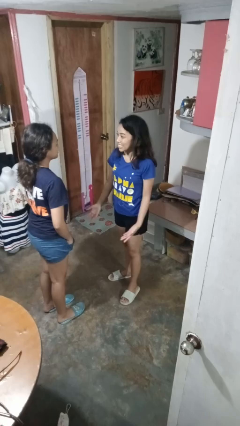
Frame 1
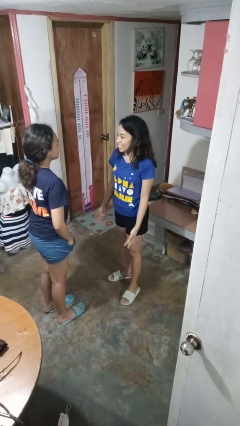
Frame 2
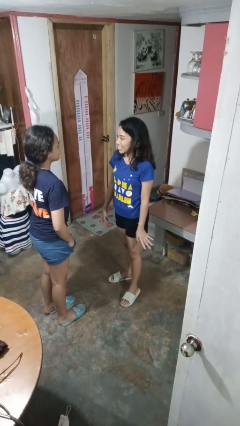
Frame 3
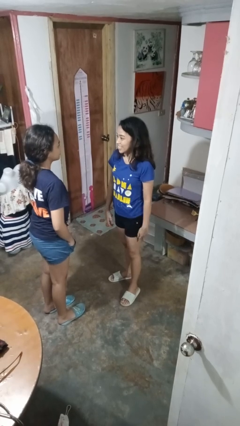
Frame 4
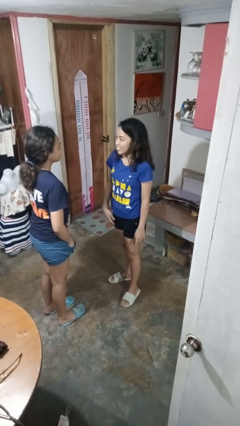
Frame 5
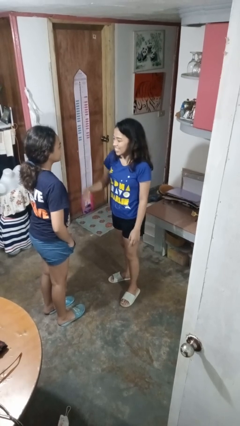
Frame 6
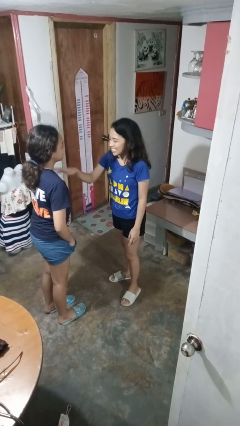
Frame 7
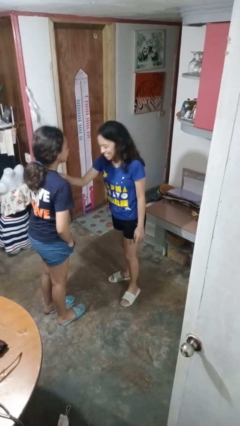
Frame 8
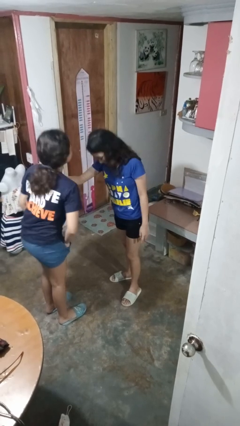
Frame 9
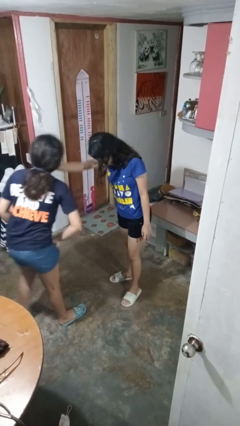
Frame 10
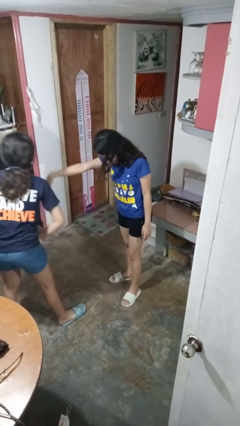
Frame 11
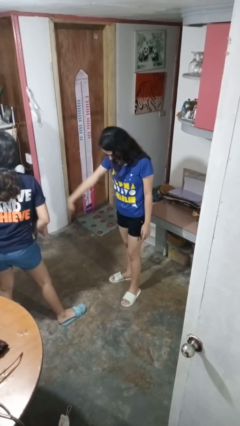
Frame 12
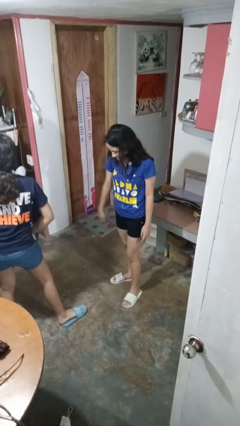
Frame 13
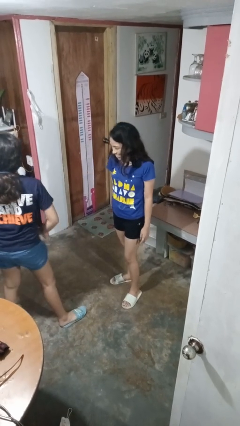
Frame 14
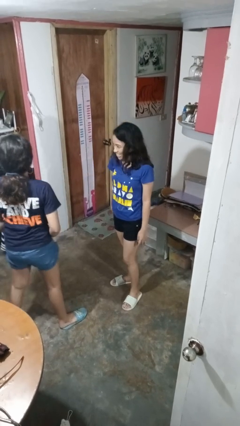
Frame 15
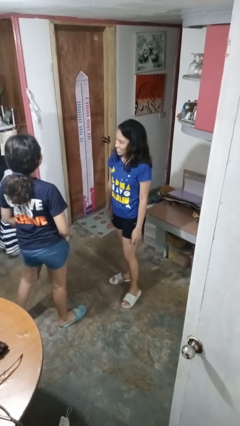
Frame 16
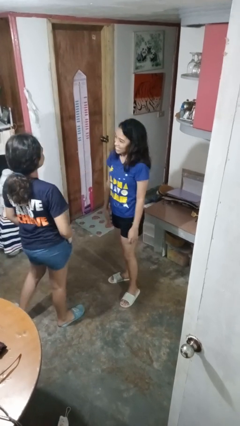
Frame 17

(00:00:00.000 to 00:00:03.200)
person shoves person

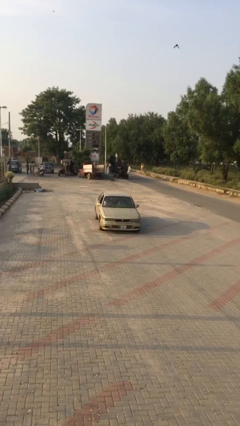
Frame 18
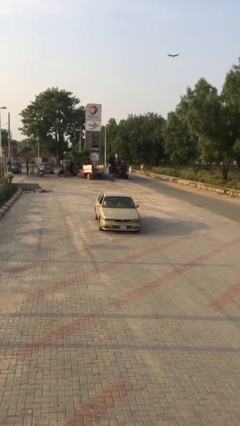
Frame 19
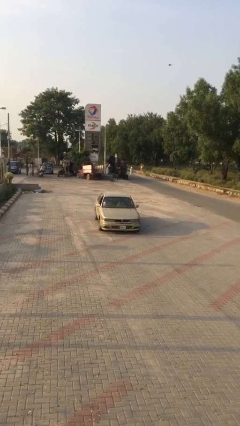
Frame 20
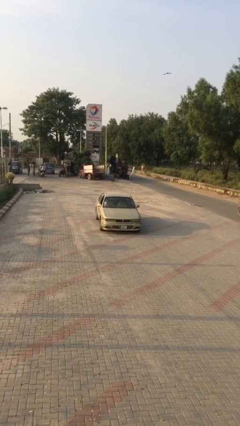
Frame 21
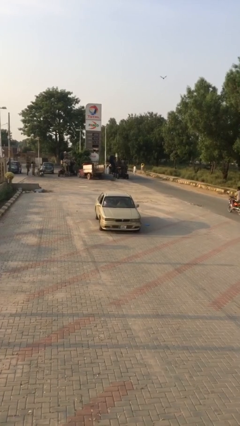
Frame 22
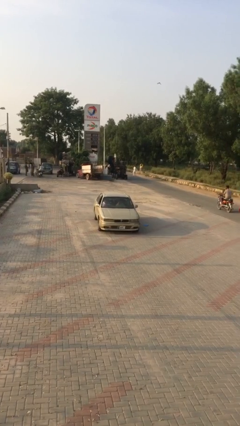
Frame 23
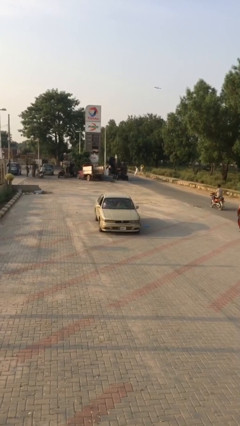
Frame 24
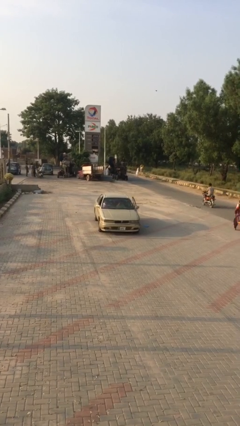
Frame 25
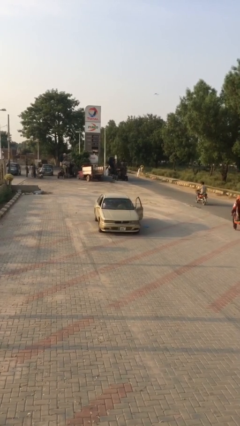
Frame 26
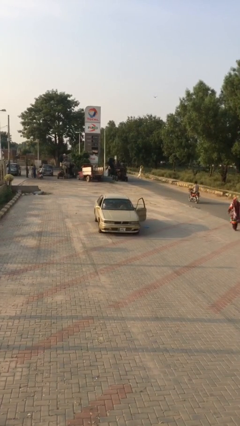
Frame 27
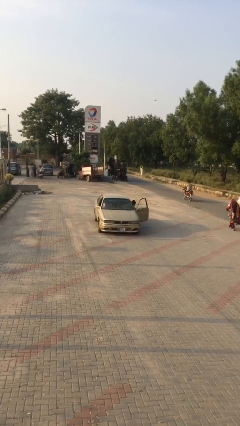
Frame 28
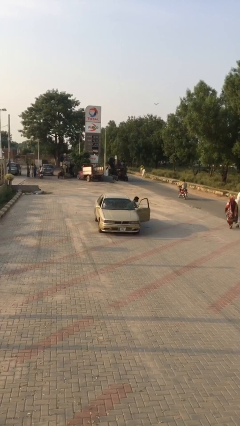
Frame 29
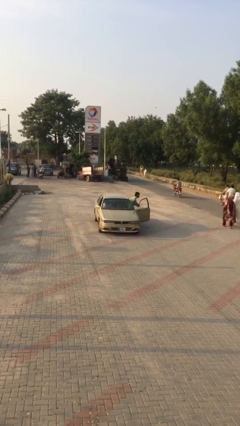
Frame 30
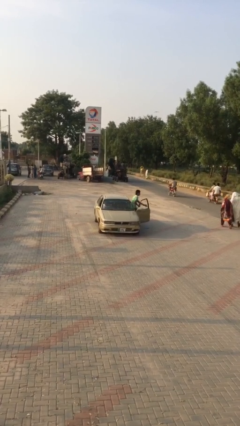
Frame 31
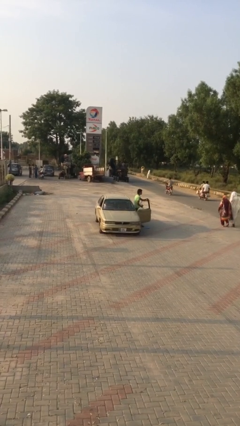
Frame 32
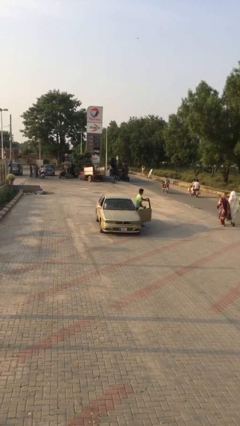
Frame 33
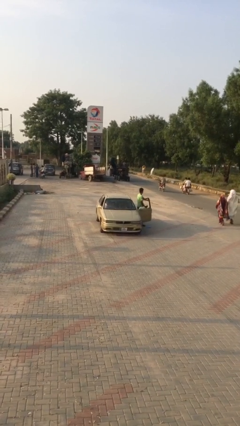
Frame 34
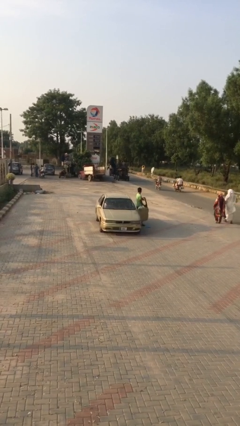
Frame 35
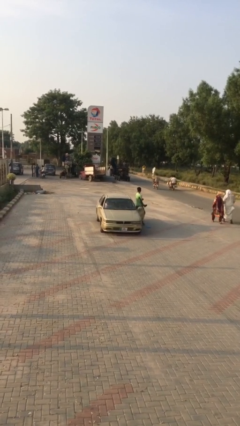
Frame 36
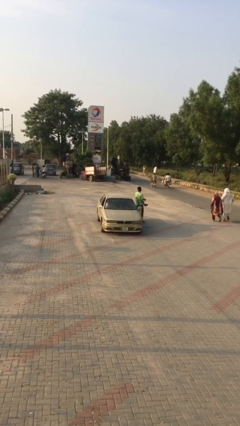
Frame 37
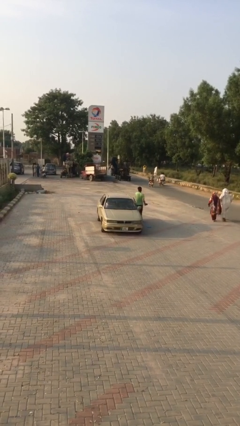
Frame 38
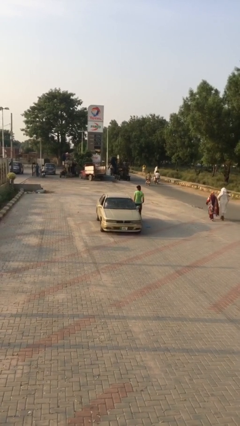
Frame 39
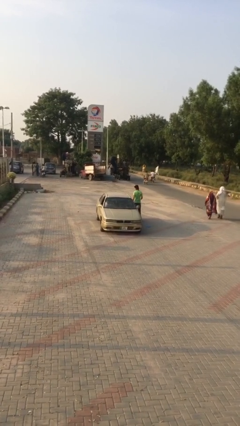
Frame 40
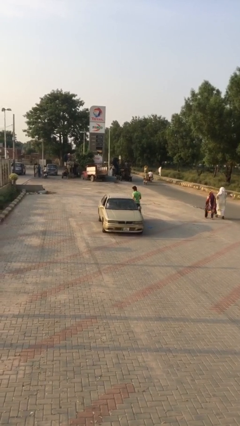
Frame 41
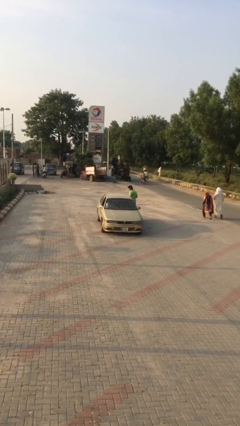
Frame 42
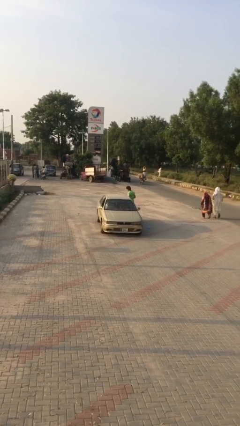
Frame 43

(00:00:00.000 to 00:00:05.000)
car drops off person

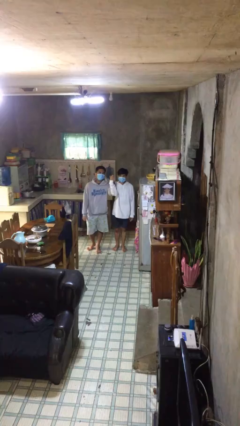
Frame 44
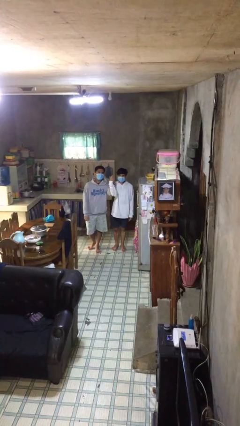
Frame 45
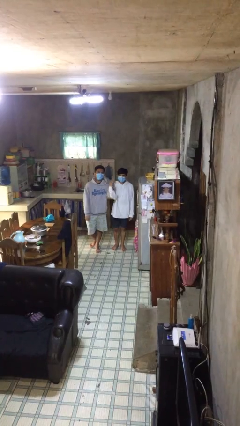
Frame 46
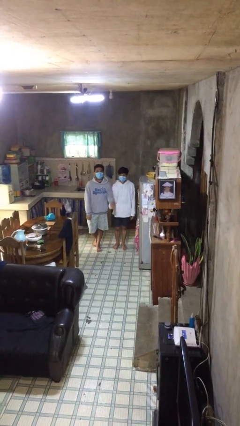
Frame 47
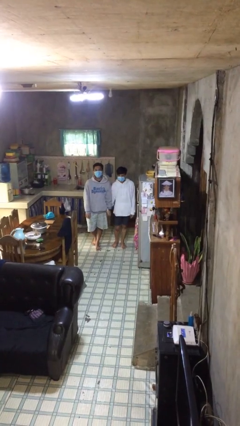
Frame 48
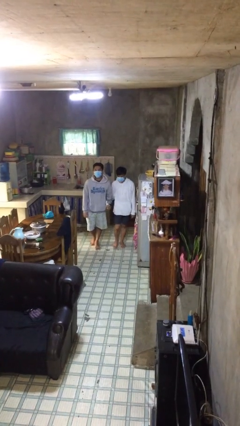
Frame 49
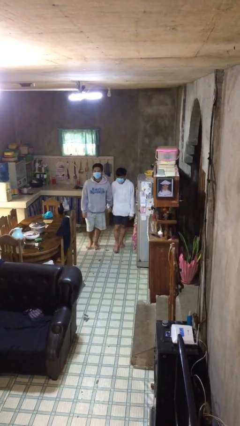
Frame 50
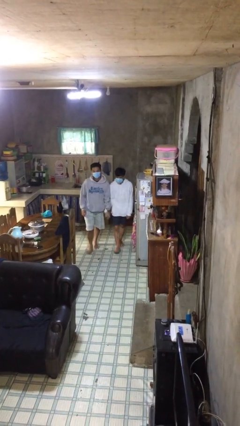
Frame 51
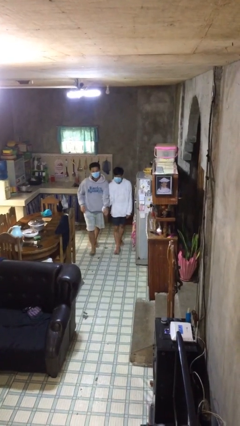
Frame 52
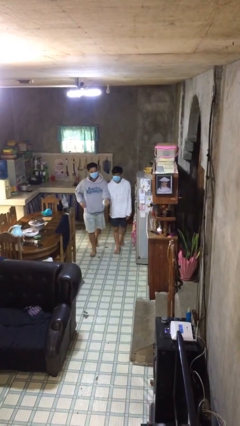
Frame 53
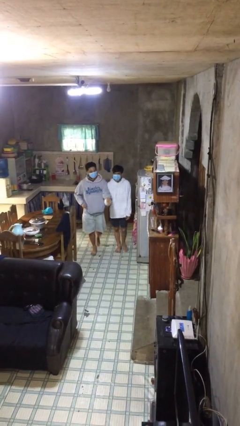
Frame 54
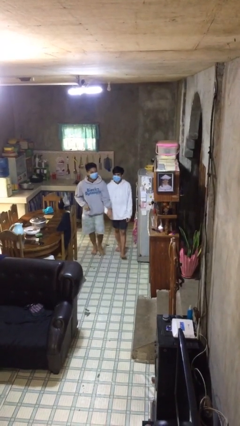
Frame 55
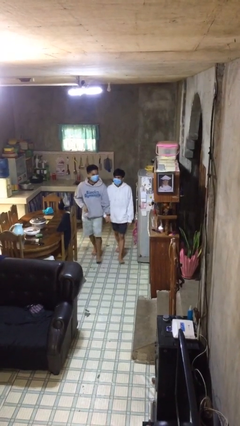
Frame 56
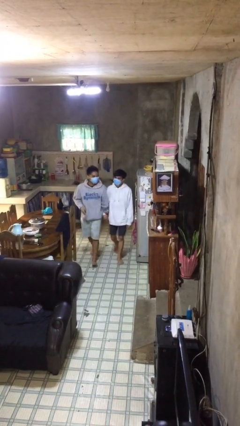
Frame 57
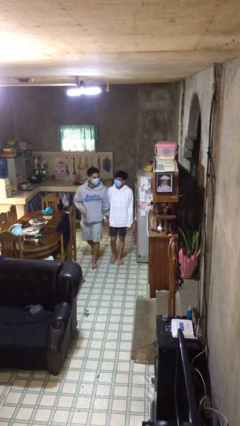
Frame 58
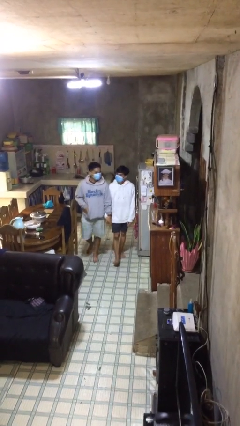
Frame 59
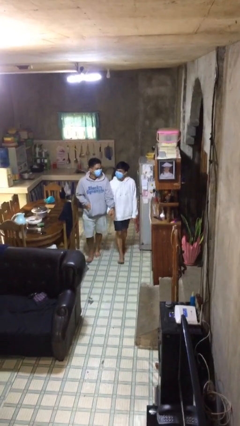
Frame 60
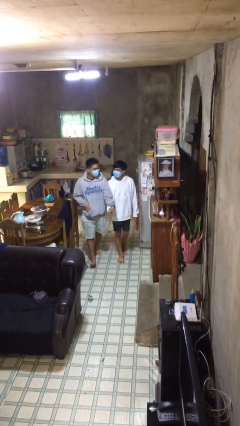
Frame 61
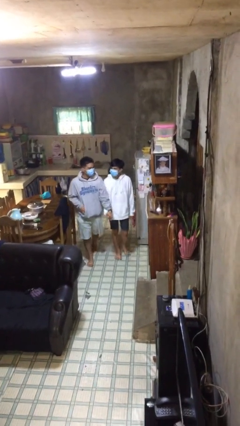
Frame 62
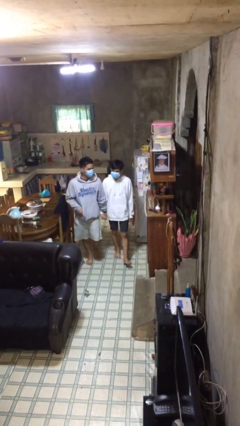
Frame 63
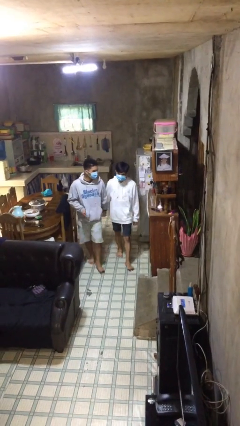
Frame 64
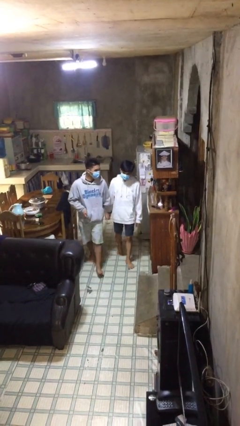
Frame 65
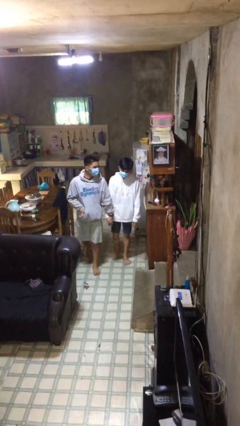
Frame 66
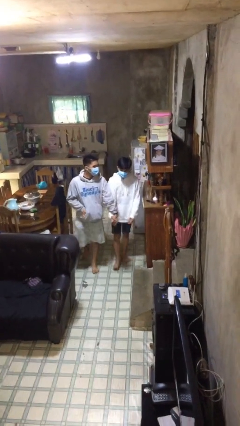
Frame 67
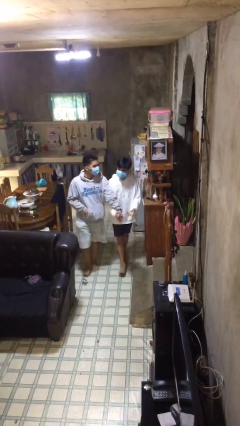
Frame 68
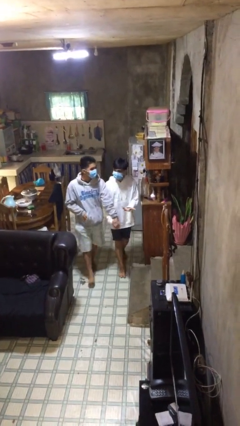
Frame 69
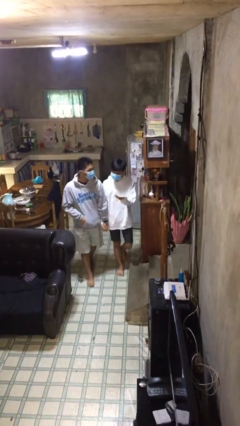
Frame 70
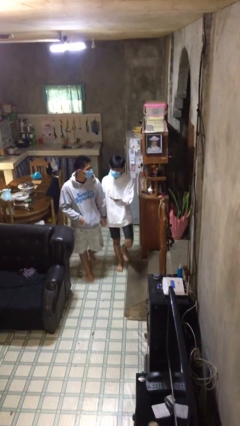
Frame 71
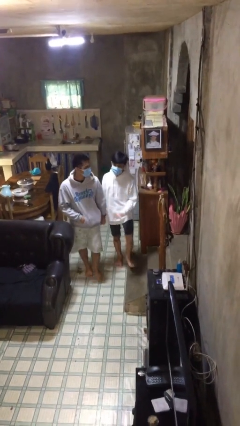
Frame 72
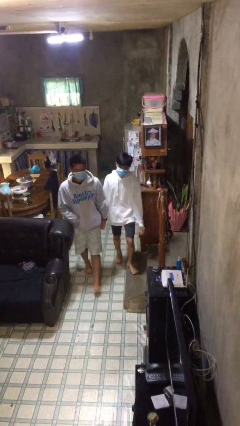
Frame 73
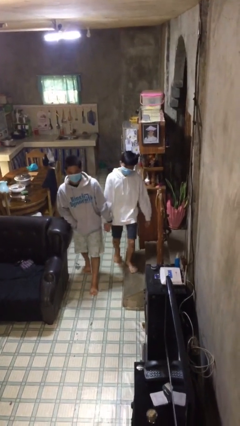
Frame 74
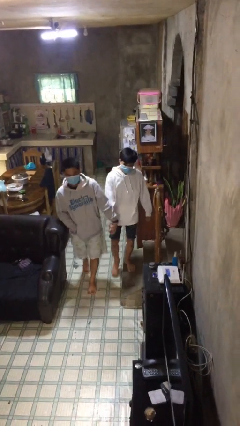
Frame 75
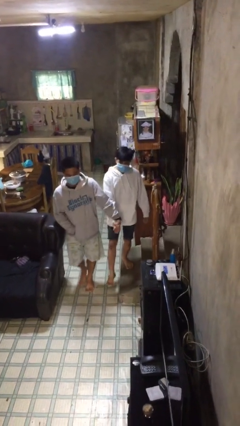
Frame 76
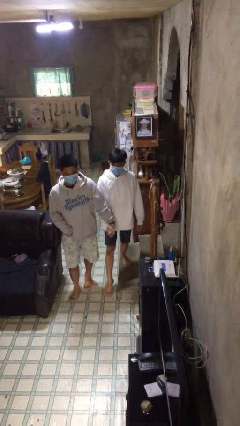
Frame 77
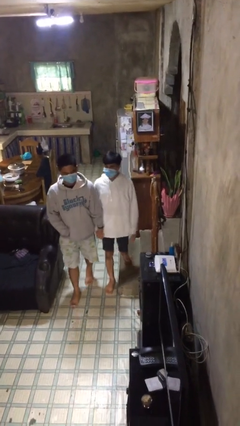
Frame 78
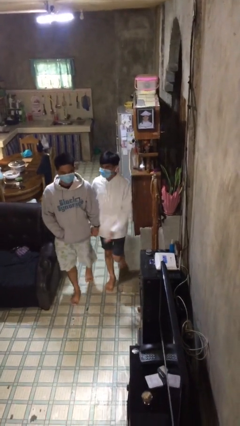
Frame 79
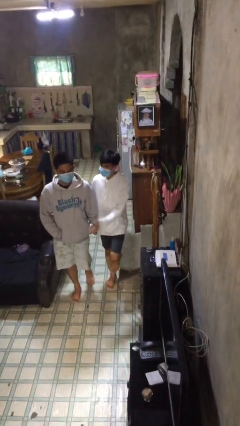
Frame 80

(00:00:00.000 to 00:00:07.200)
person holds hand

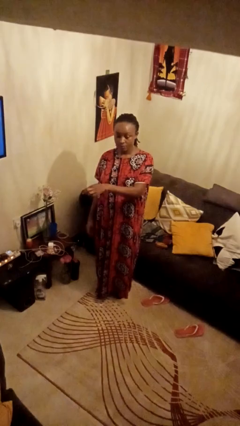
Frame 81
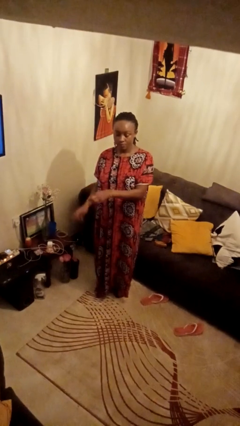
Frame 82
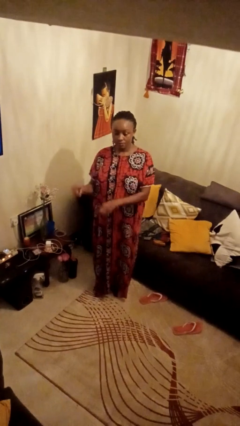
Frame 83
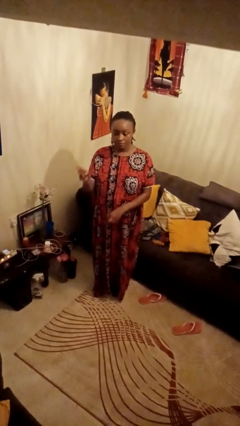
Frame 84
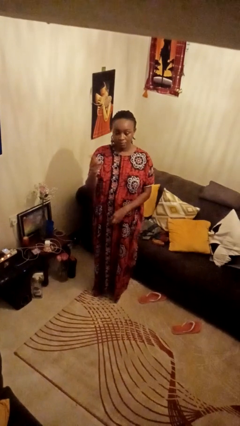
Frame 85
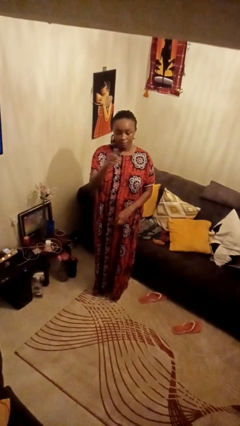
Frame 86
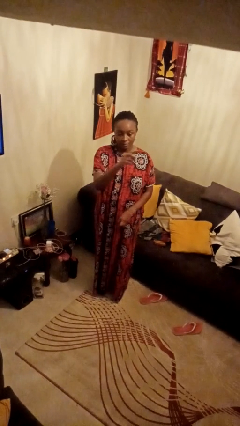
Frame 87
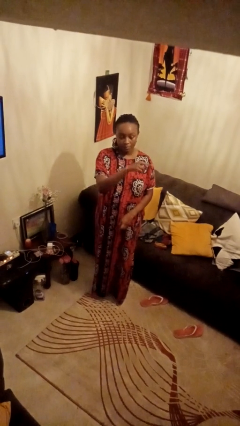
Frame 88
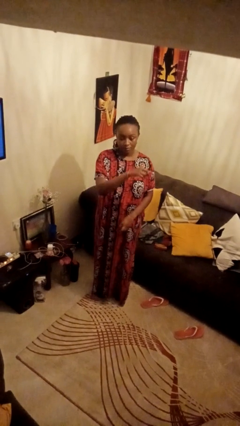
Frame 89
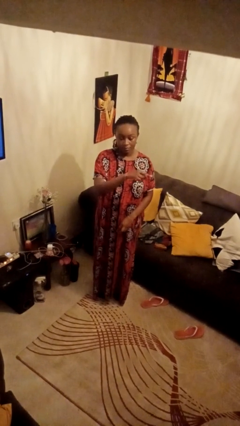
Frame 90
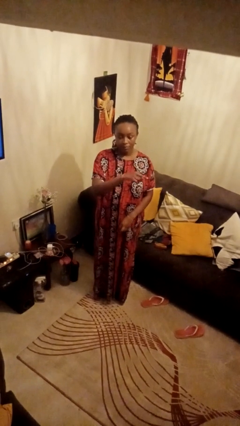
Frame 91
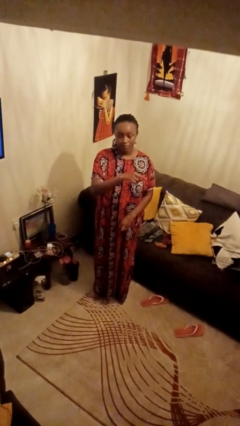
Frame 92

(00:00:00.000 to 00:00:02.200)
person gestures swipe right

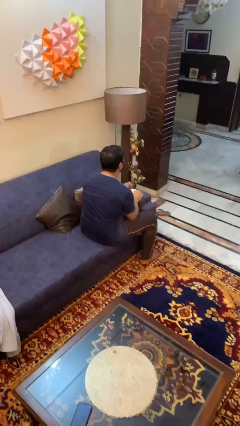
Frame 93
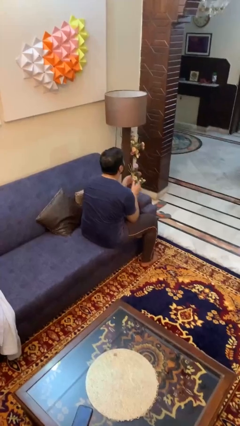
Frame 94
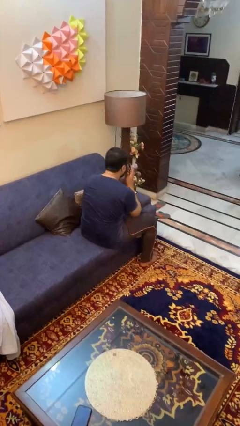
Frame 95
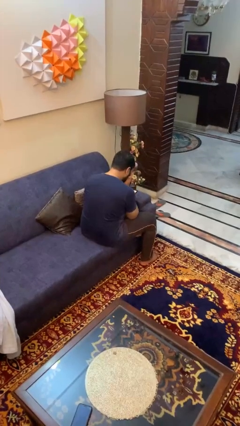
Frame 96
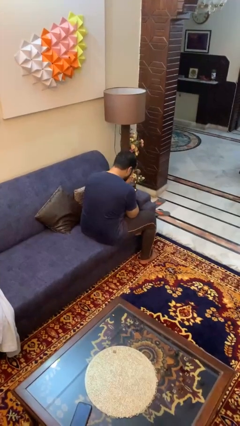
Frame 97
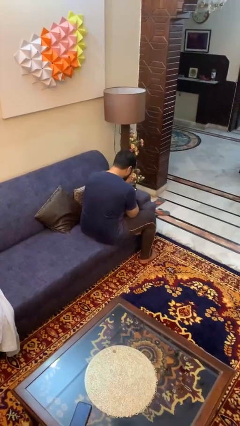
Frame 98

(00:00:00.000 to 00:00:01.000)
person sneezes into hand
